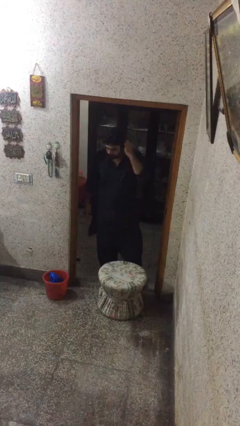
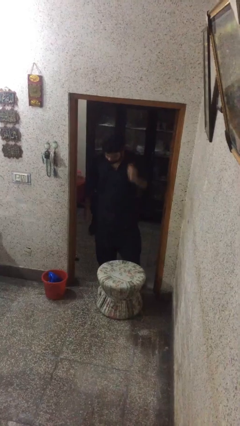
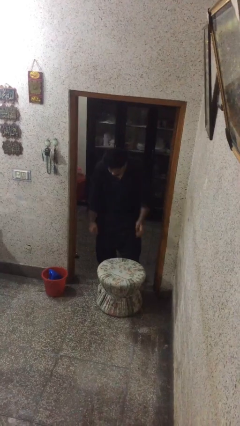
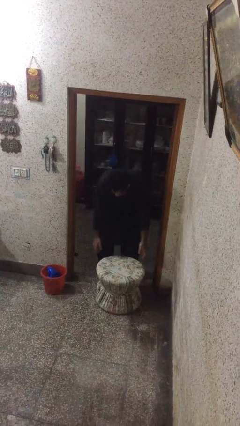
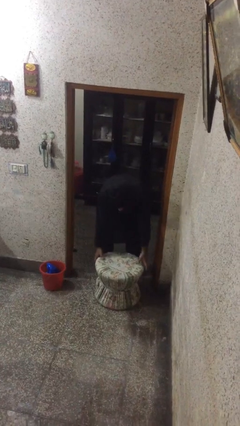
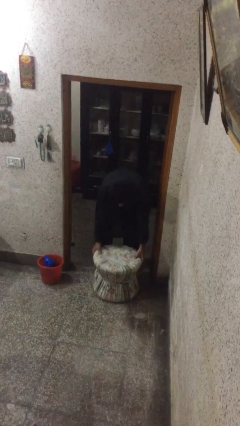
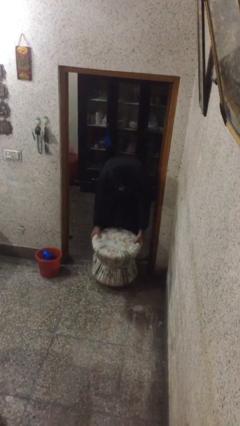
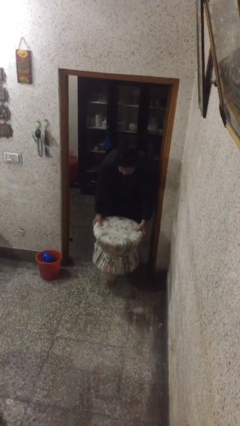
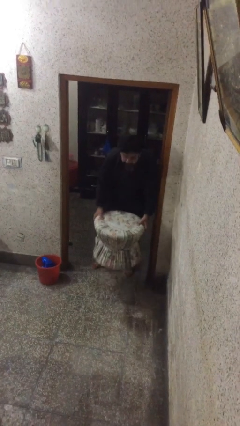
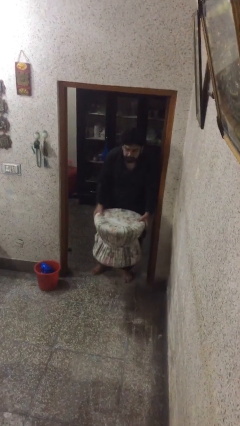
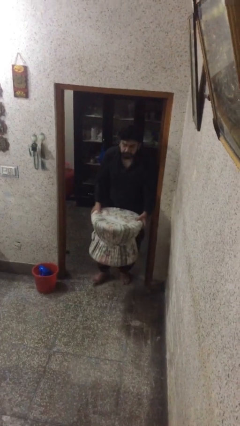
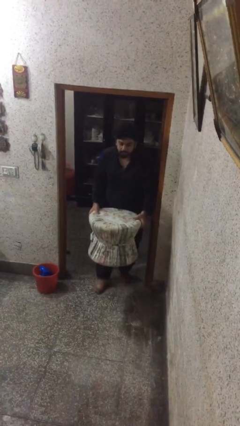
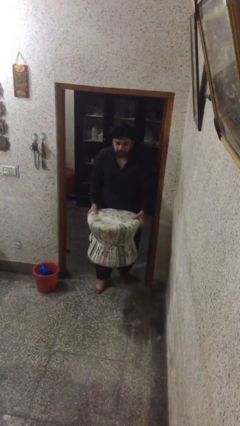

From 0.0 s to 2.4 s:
person picks up object from floor

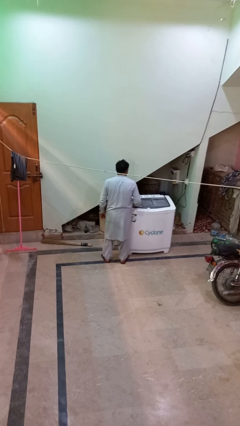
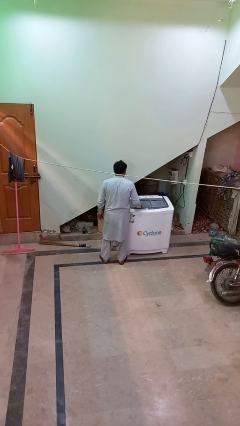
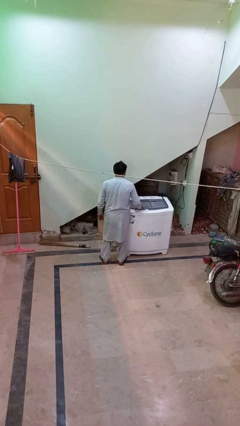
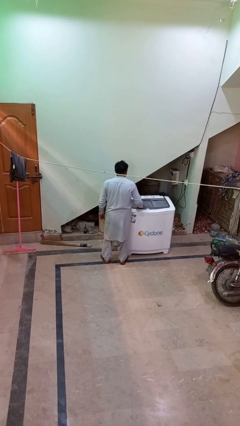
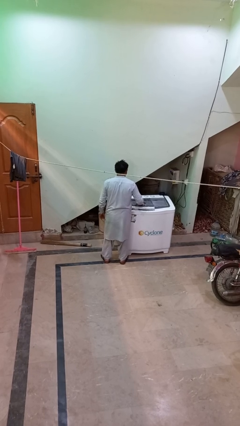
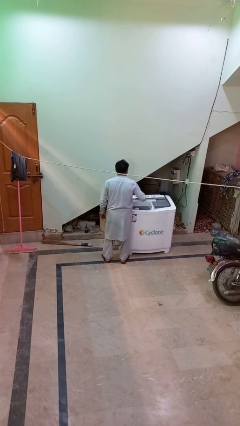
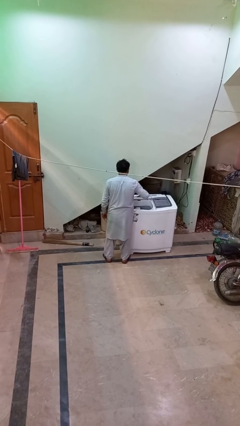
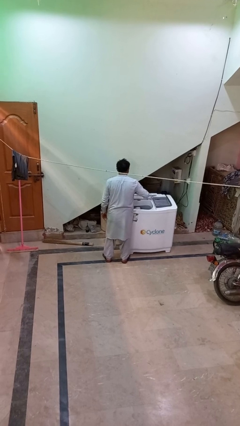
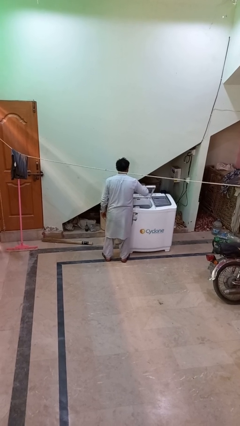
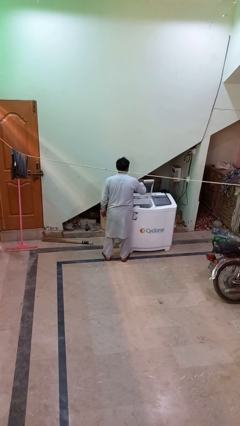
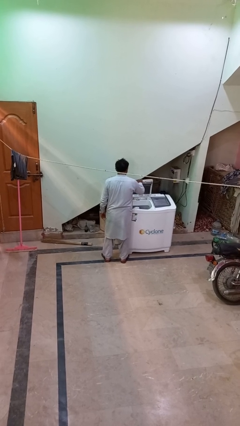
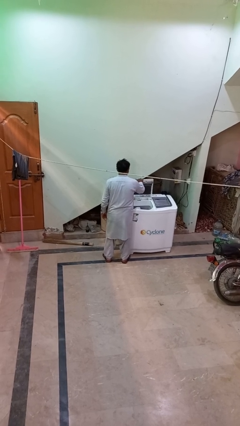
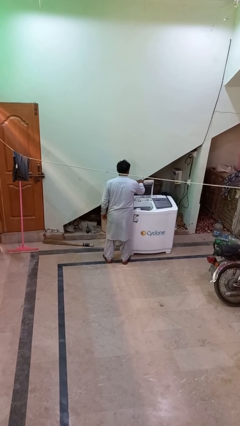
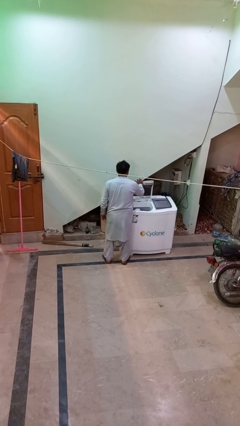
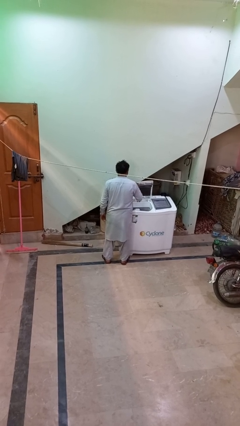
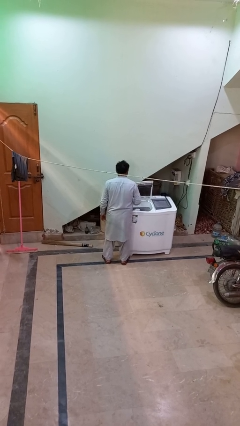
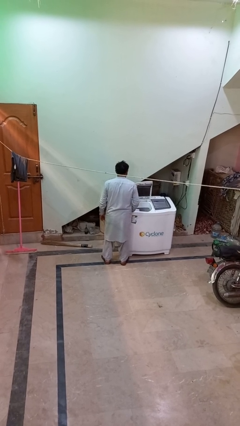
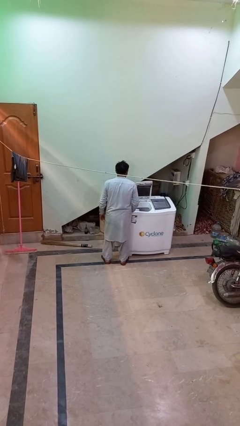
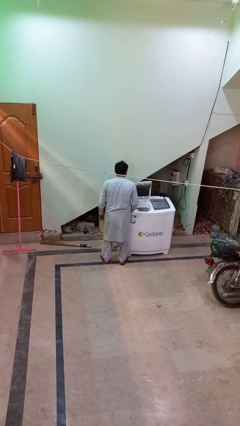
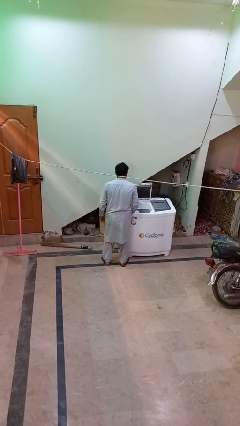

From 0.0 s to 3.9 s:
person opens clothes washer

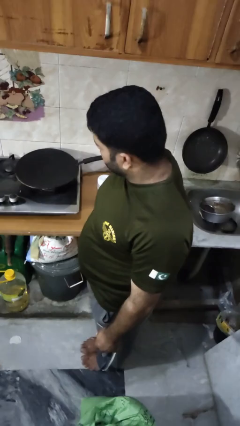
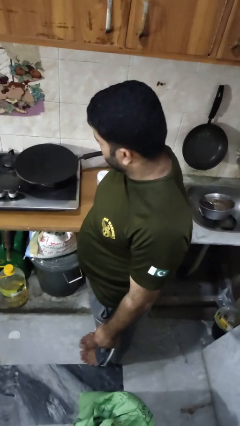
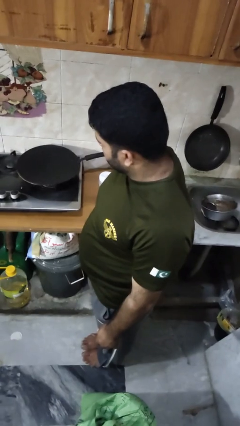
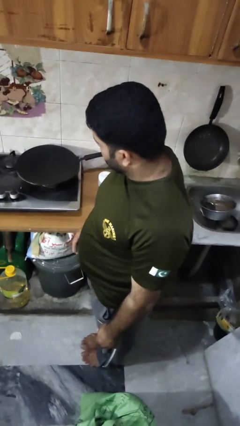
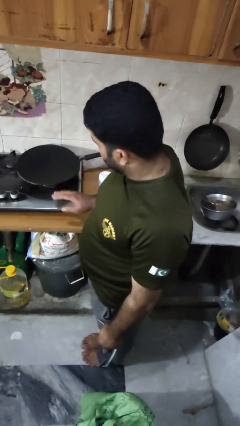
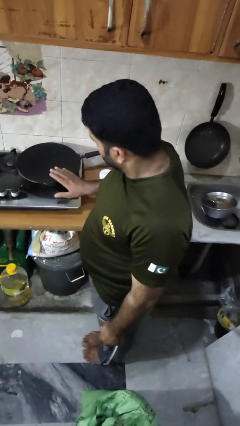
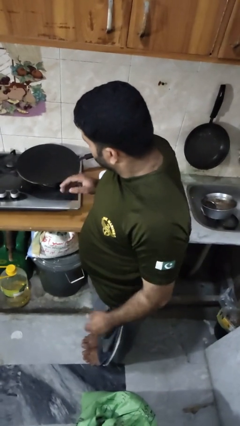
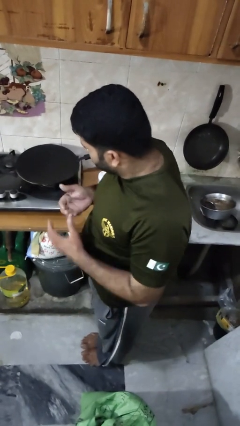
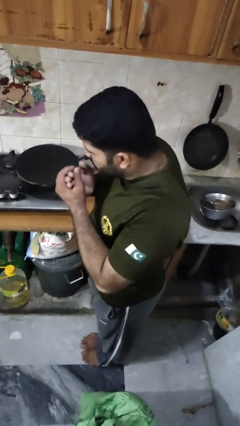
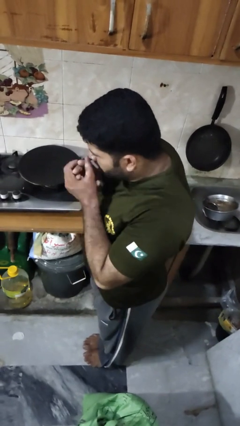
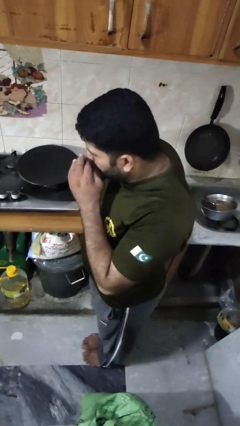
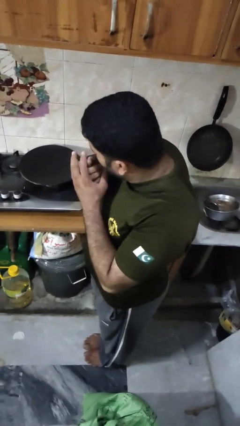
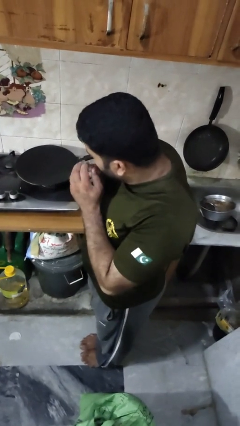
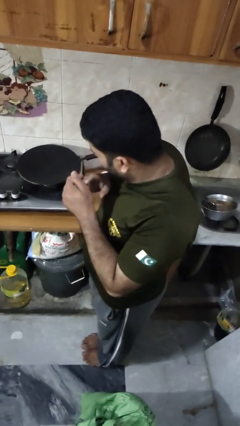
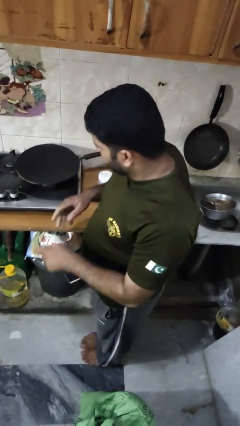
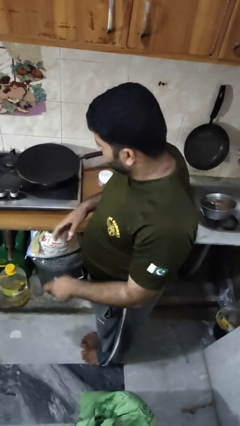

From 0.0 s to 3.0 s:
person burns hand

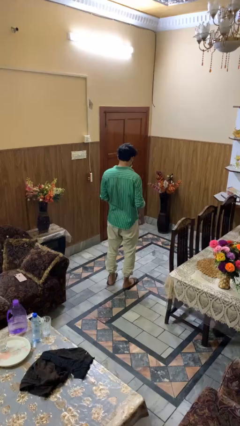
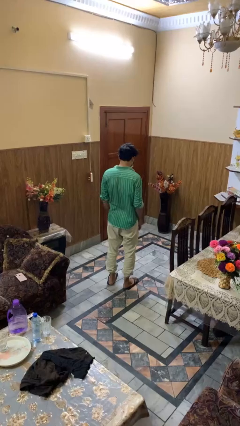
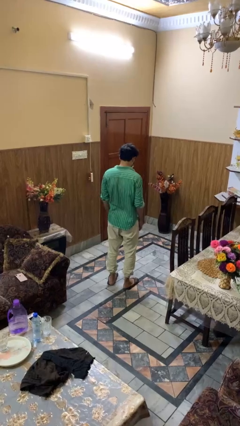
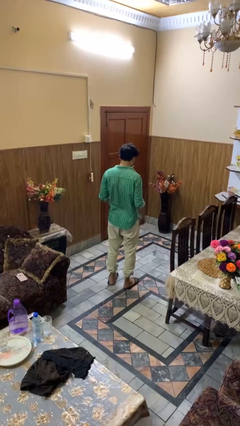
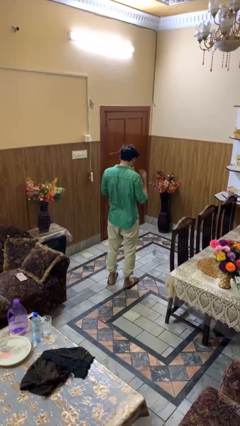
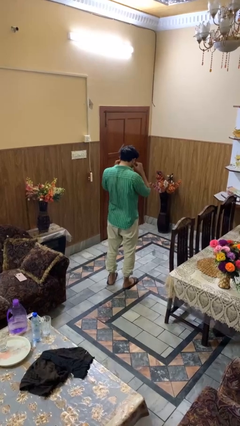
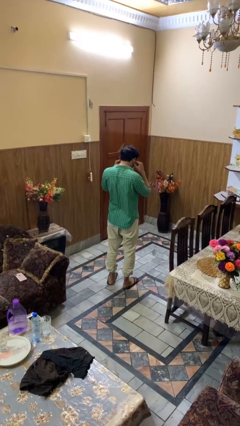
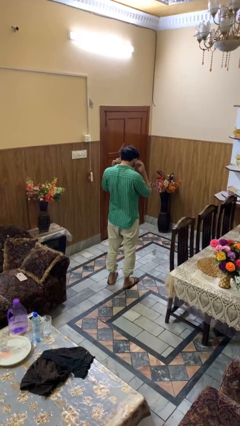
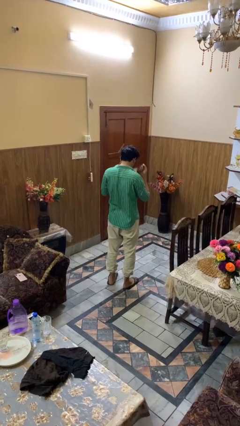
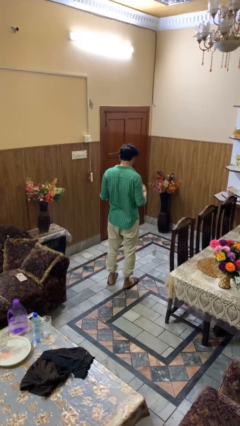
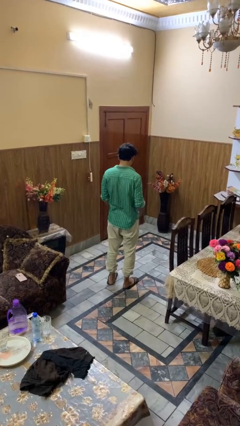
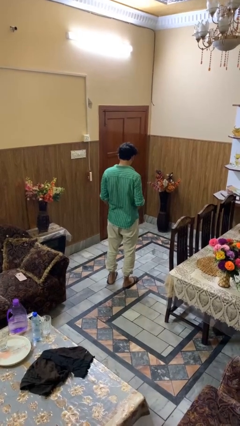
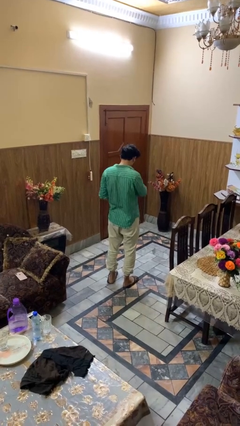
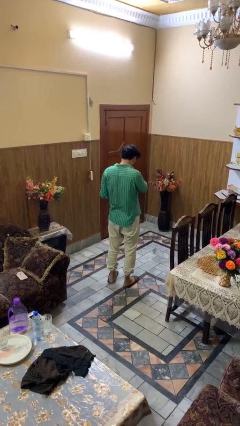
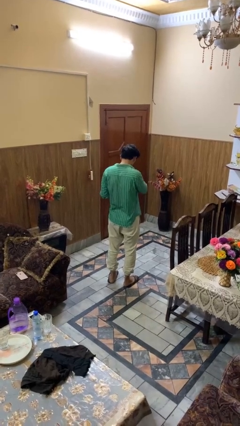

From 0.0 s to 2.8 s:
person takes off facemask

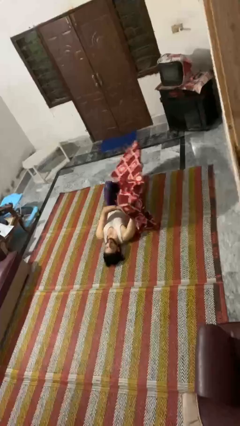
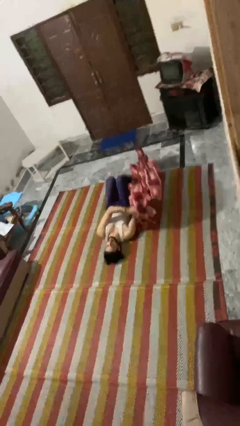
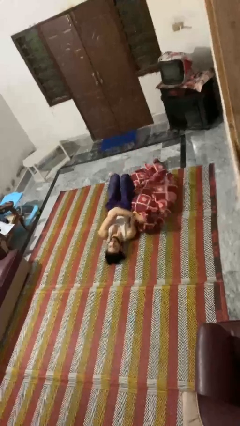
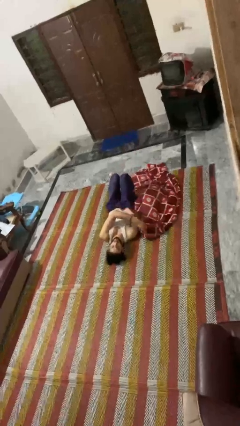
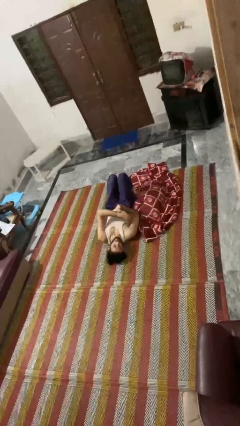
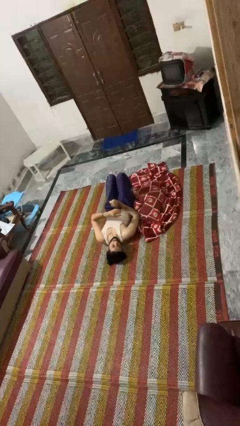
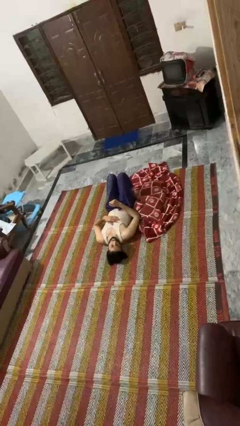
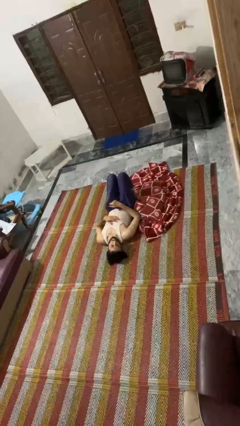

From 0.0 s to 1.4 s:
person uncovers with blanket

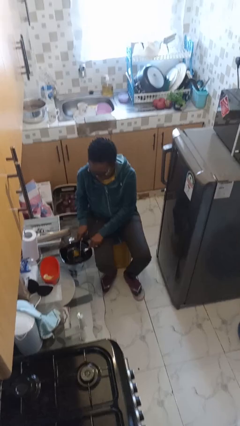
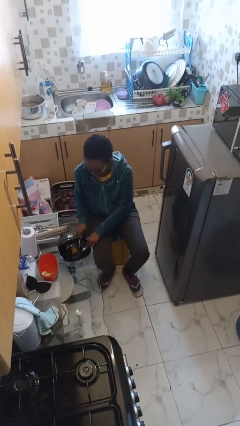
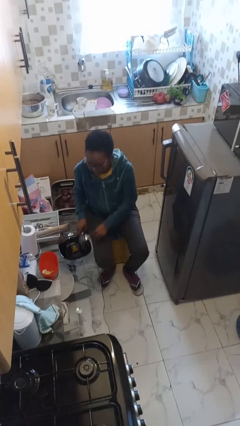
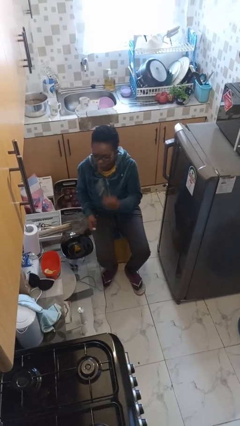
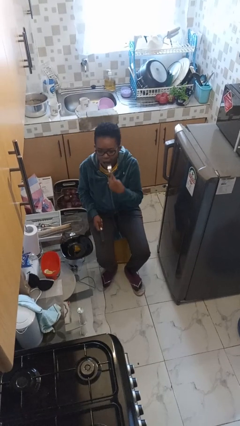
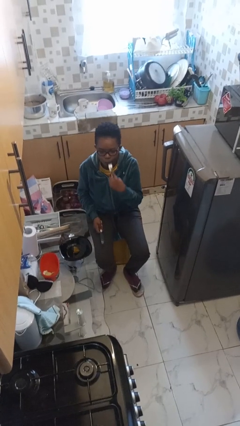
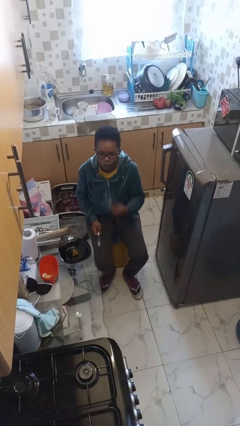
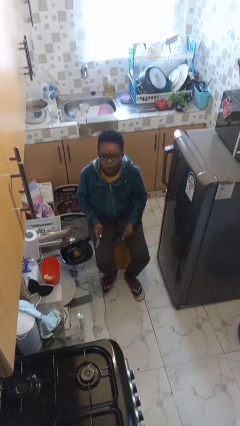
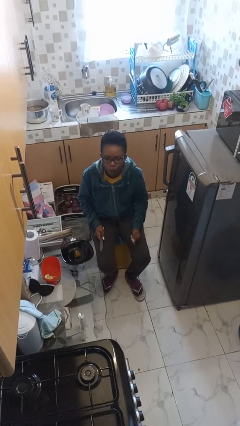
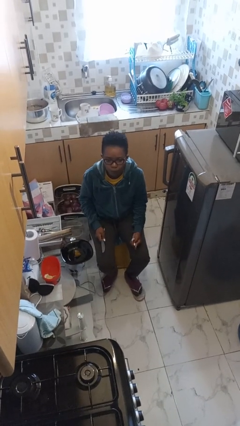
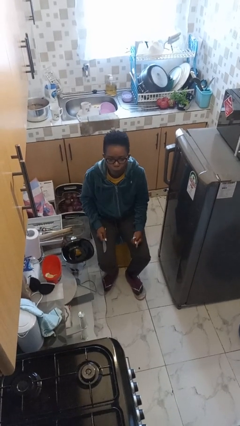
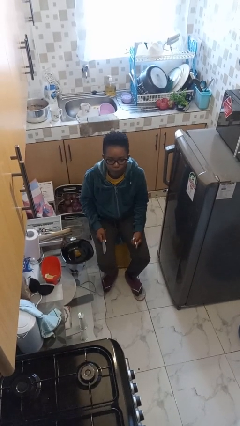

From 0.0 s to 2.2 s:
person eats with utensil

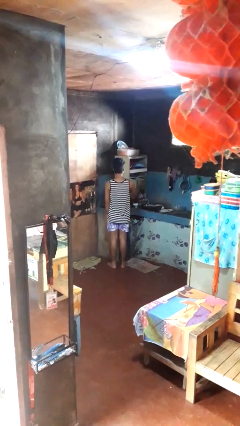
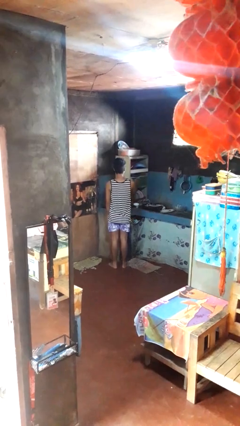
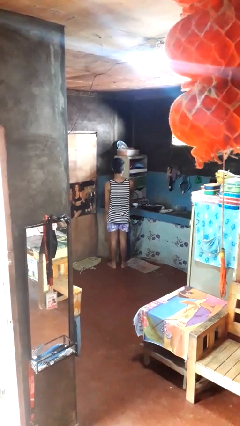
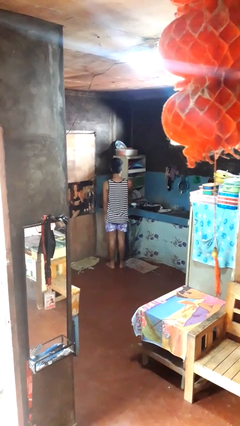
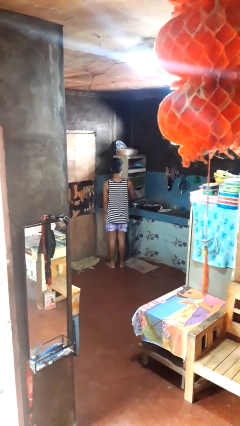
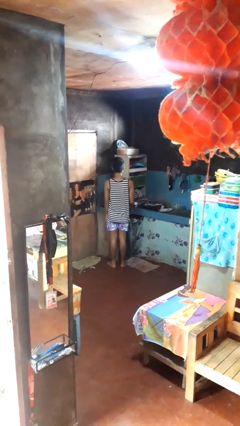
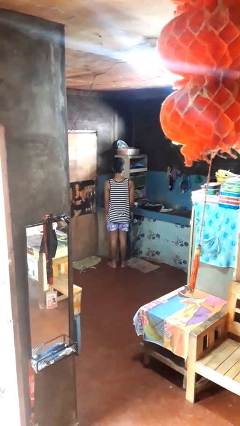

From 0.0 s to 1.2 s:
person closes kitchen drawer
